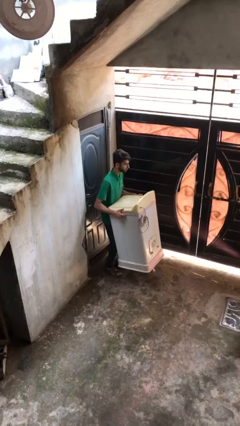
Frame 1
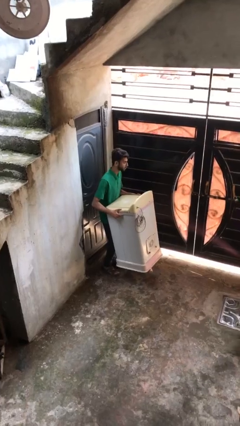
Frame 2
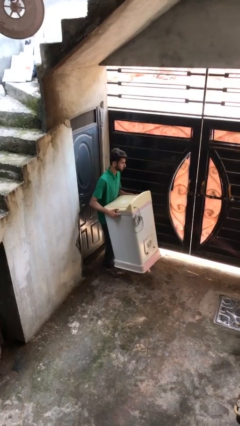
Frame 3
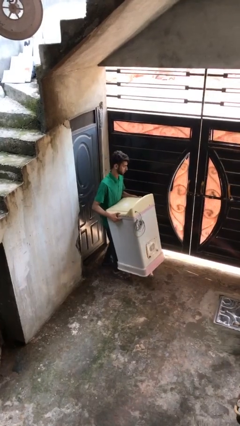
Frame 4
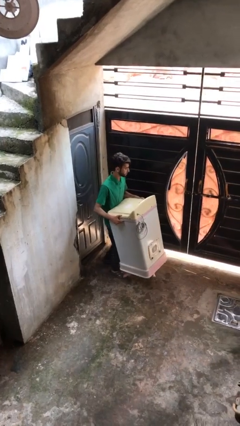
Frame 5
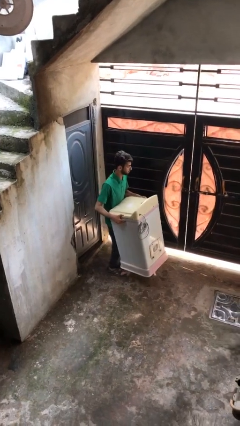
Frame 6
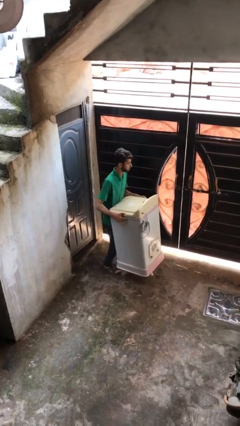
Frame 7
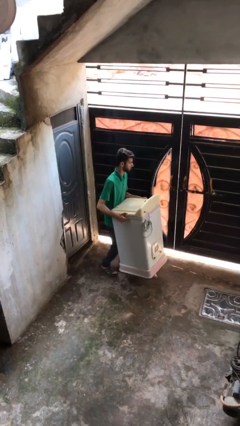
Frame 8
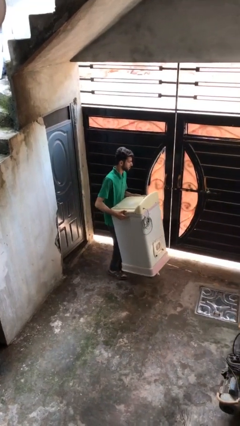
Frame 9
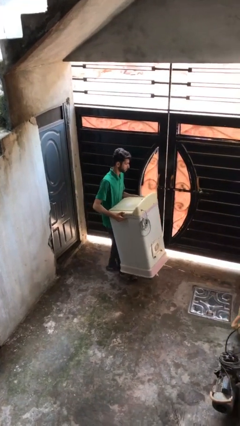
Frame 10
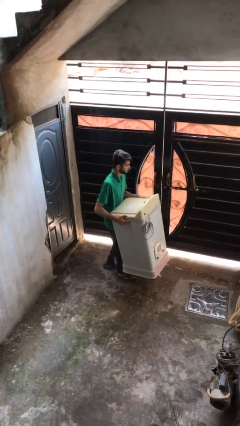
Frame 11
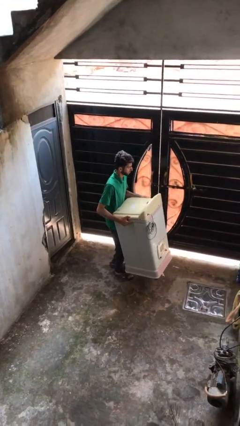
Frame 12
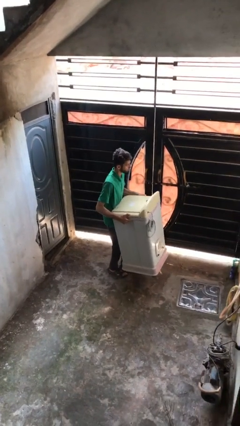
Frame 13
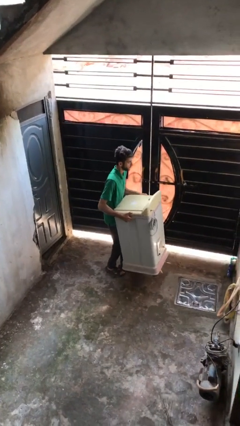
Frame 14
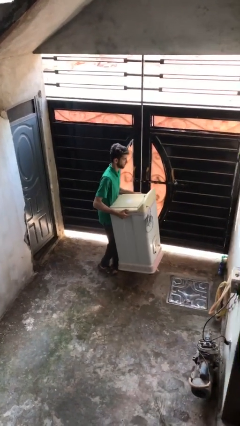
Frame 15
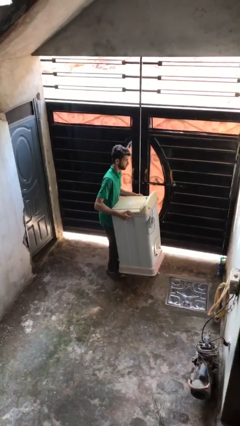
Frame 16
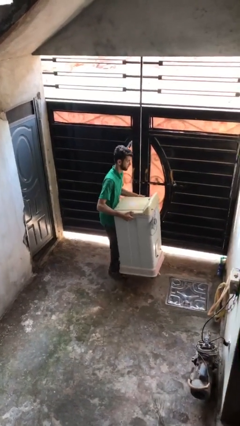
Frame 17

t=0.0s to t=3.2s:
person carries heavy object

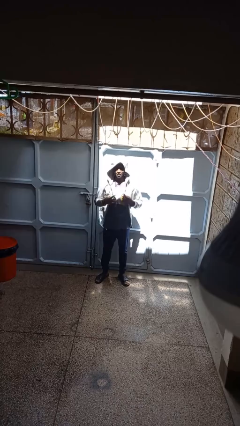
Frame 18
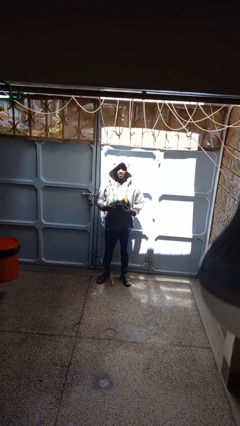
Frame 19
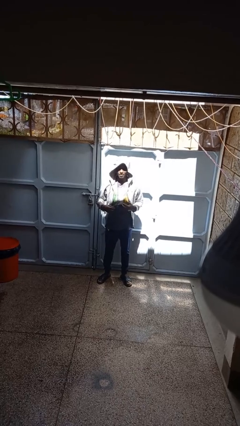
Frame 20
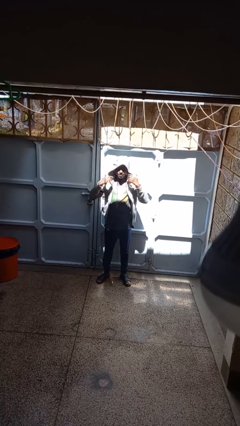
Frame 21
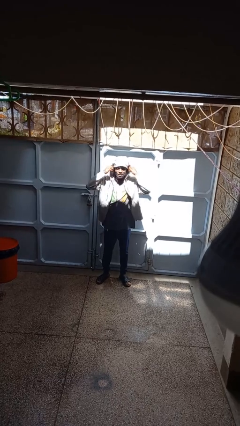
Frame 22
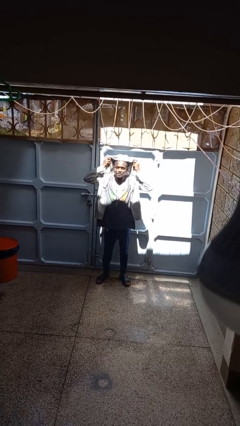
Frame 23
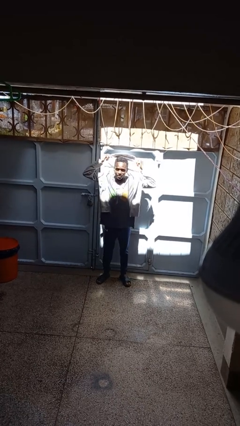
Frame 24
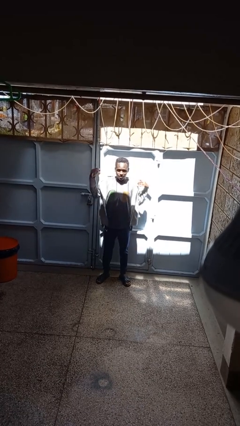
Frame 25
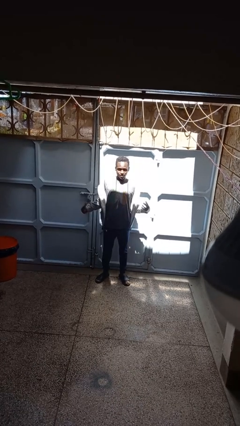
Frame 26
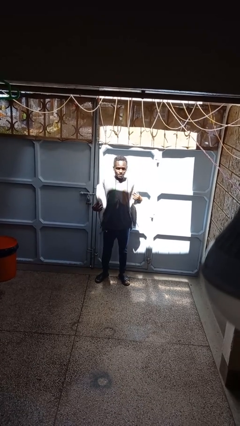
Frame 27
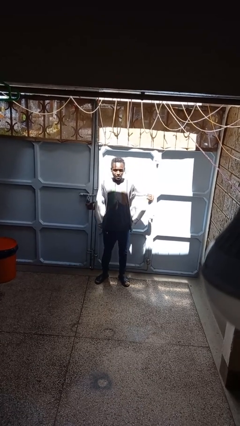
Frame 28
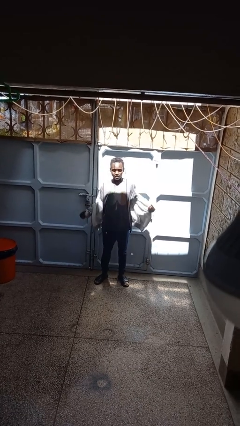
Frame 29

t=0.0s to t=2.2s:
person takes off hoodie

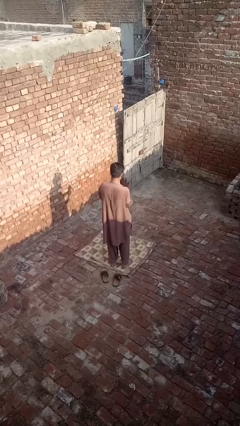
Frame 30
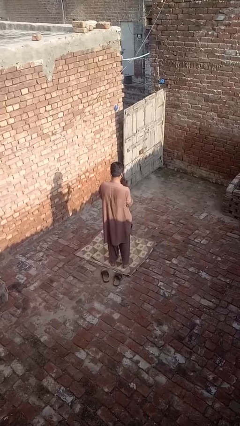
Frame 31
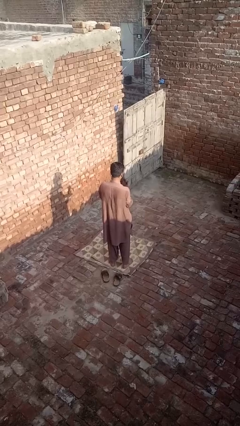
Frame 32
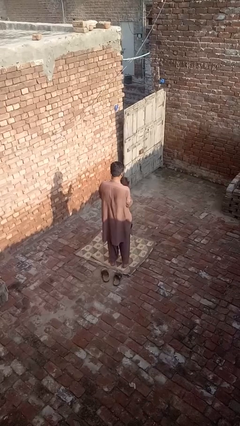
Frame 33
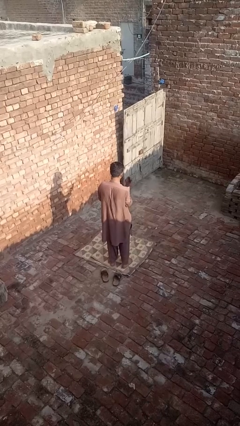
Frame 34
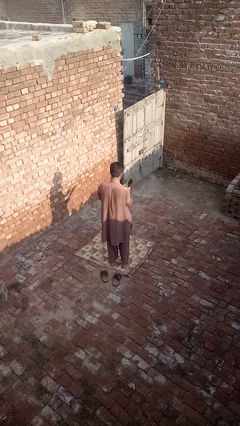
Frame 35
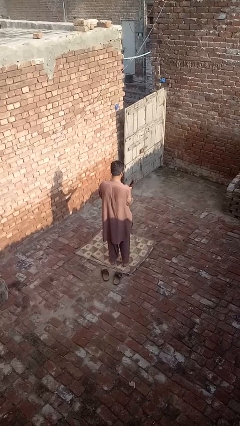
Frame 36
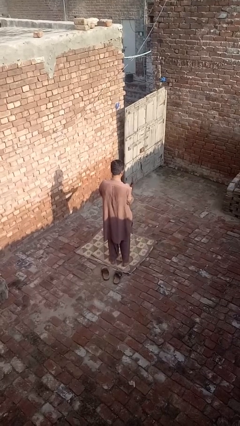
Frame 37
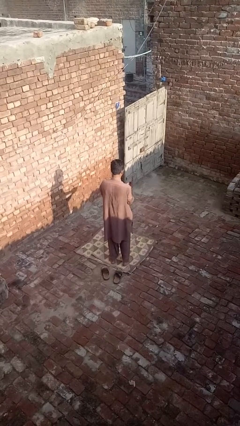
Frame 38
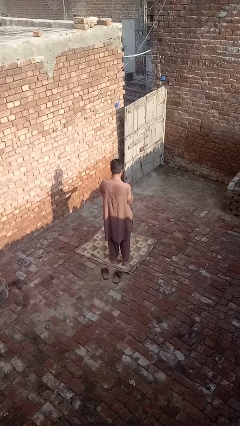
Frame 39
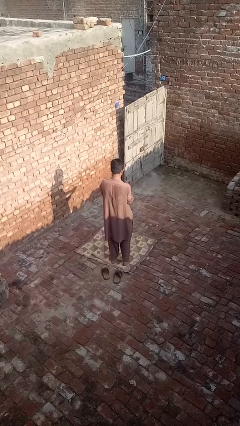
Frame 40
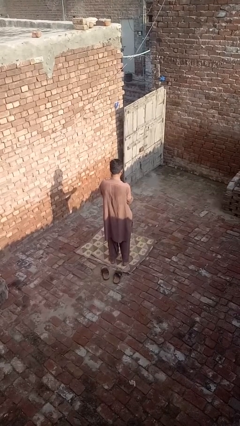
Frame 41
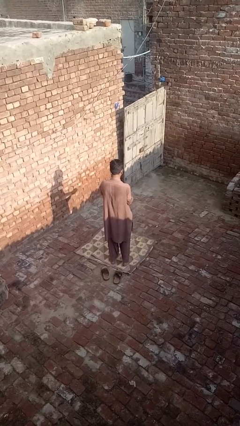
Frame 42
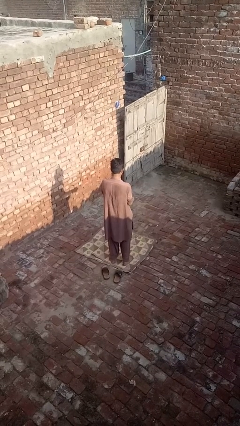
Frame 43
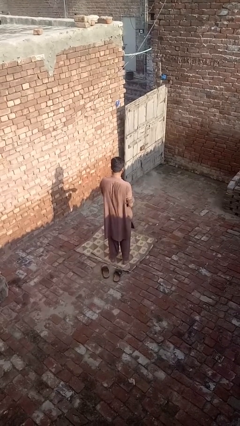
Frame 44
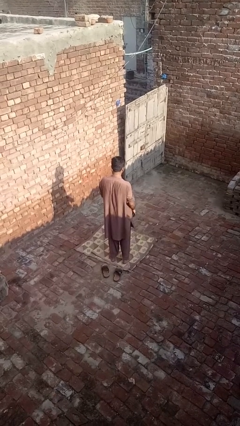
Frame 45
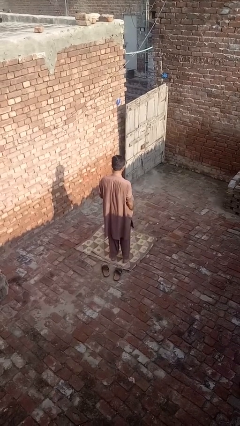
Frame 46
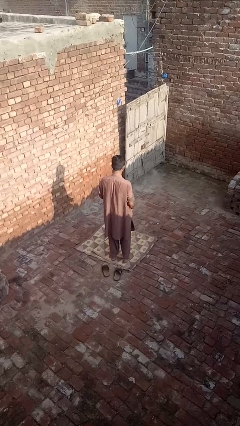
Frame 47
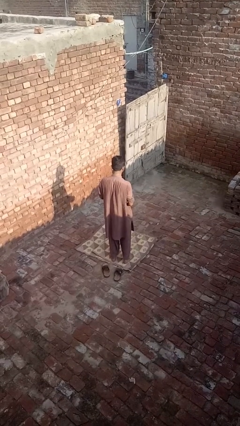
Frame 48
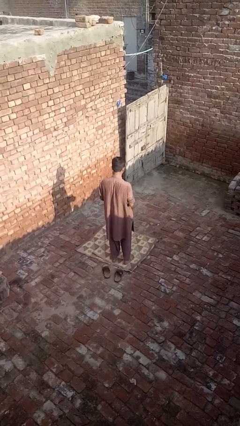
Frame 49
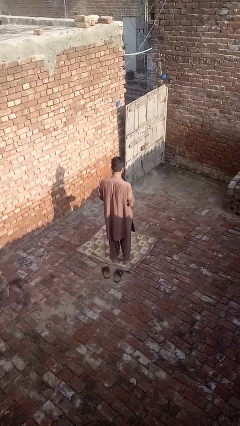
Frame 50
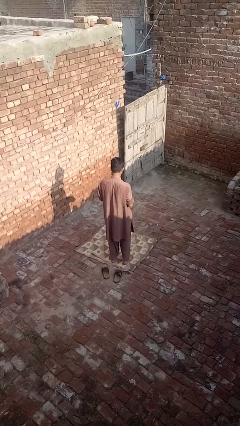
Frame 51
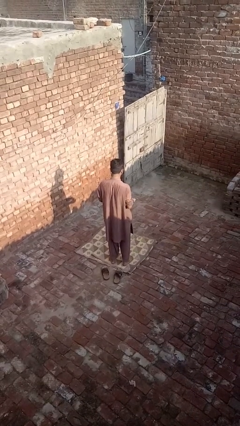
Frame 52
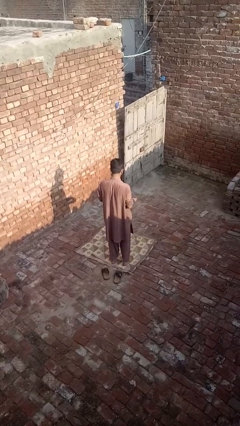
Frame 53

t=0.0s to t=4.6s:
person takes off gloves

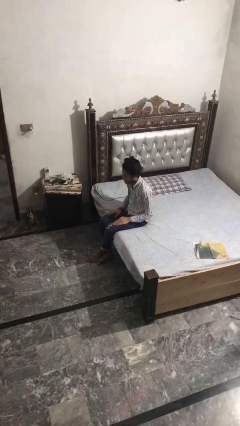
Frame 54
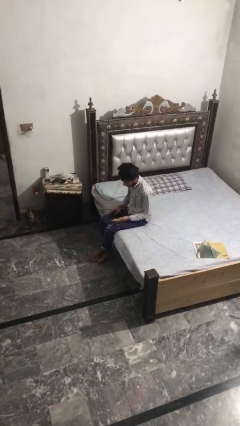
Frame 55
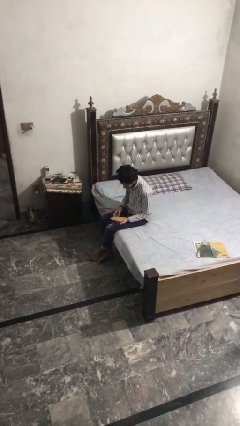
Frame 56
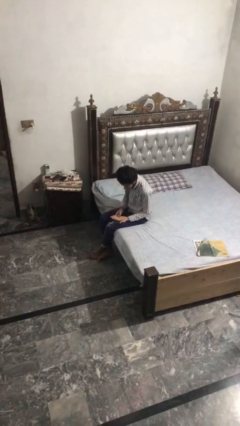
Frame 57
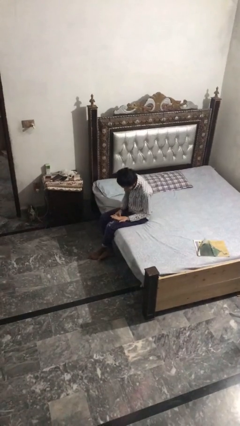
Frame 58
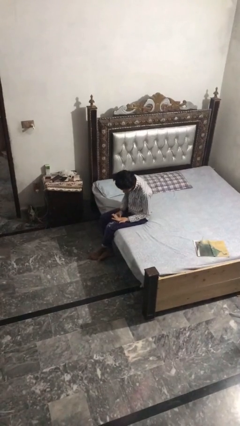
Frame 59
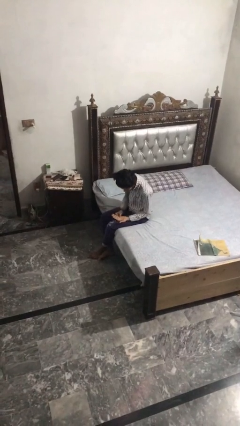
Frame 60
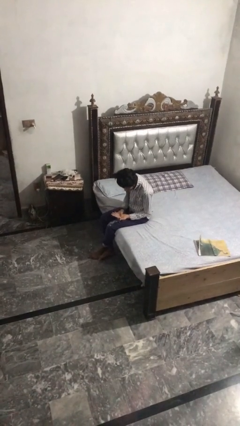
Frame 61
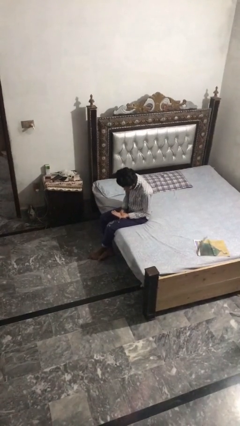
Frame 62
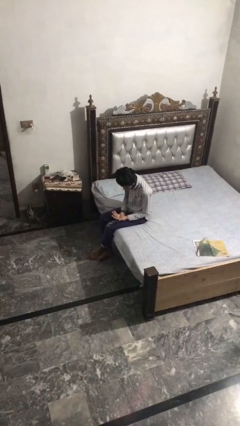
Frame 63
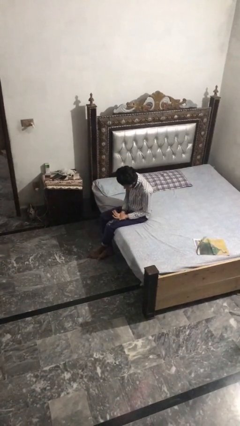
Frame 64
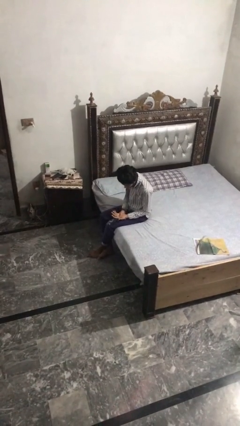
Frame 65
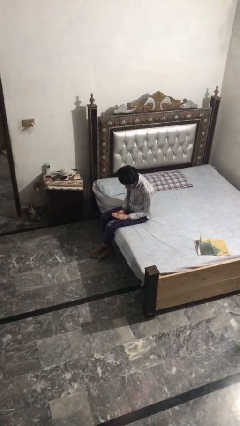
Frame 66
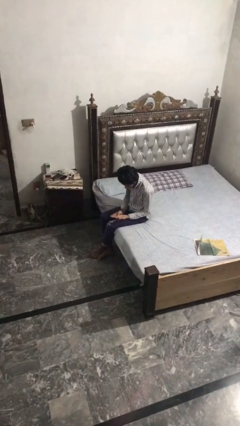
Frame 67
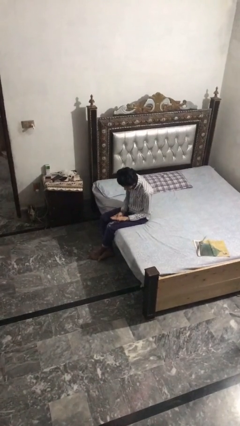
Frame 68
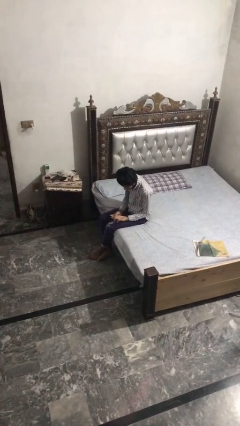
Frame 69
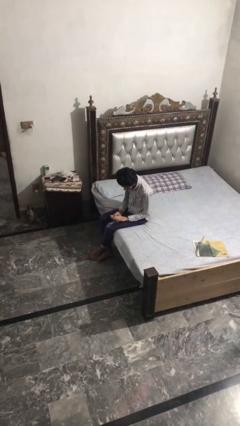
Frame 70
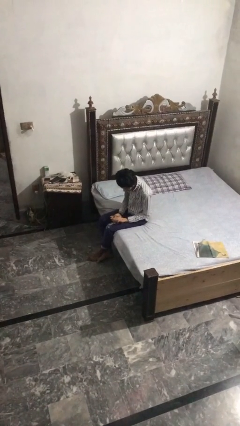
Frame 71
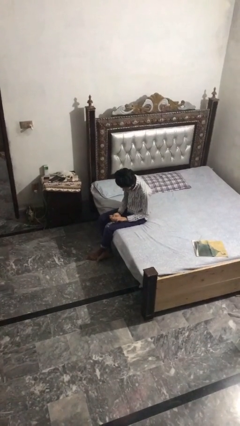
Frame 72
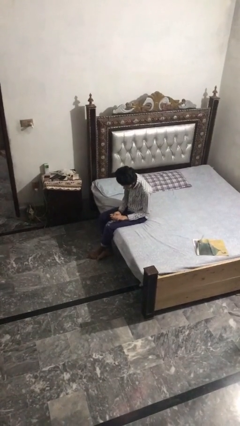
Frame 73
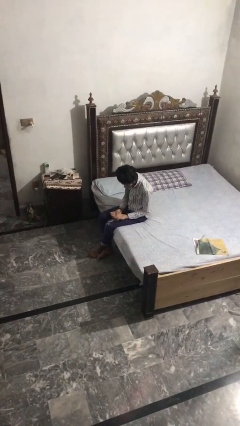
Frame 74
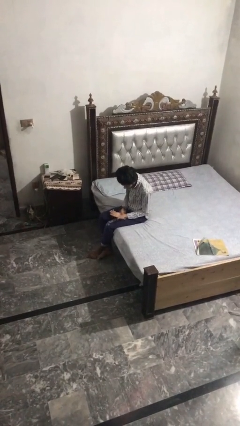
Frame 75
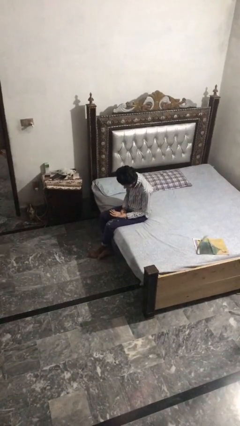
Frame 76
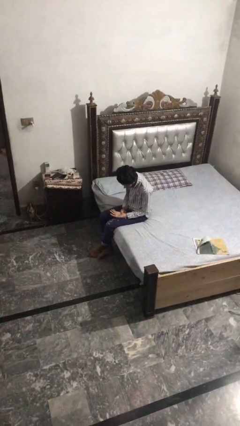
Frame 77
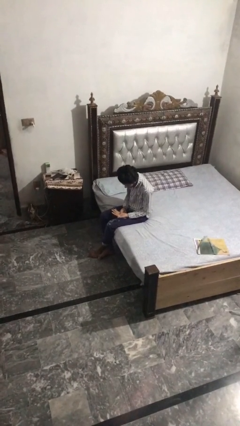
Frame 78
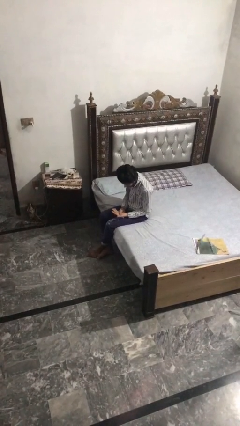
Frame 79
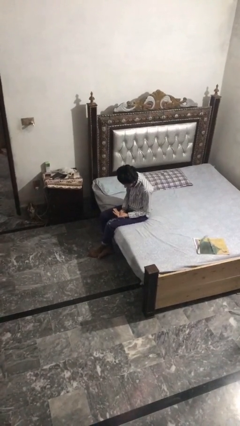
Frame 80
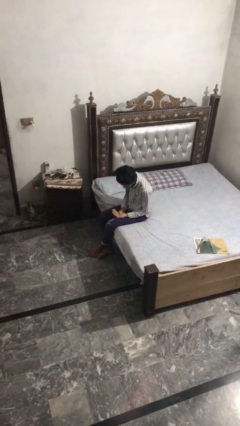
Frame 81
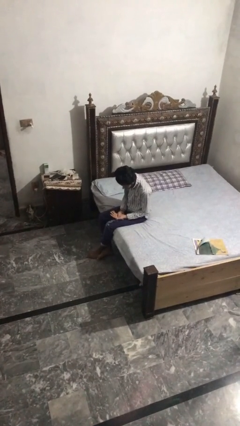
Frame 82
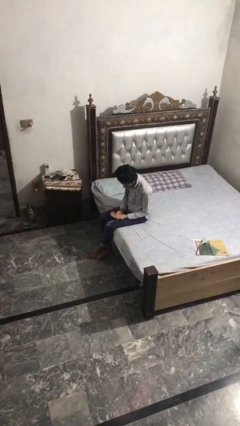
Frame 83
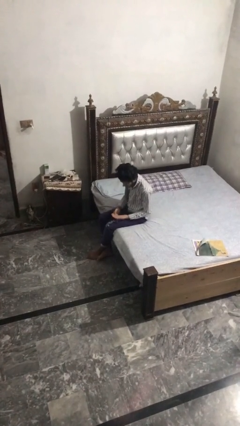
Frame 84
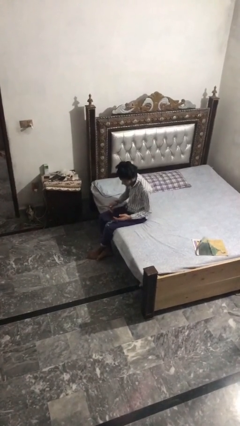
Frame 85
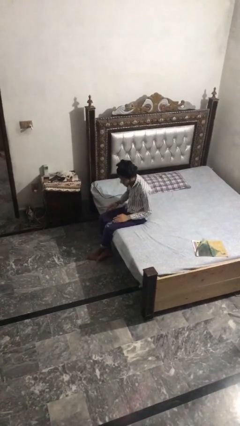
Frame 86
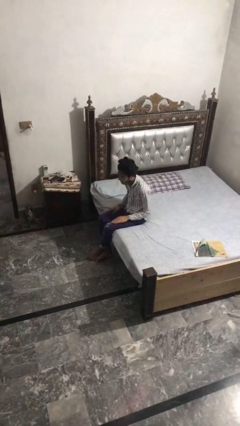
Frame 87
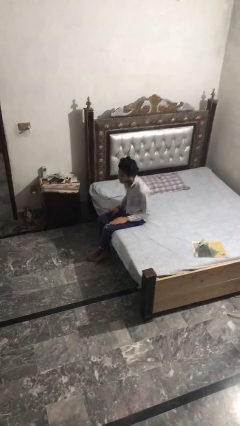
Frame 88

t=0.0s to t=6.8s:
person looks at hands in lap

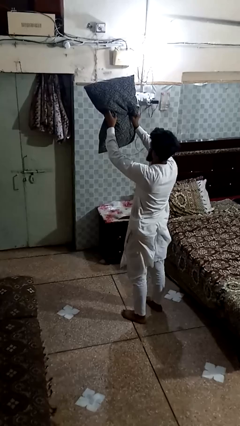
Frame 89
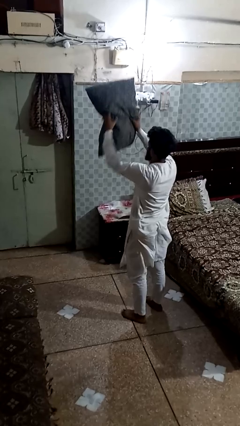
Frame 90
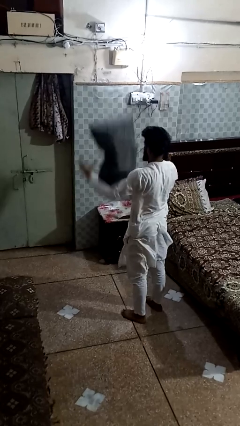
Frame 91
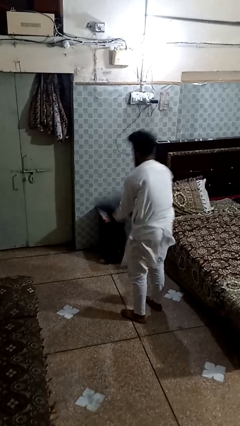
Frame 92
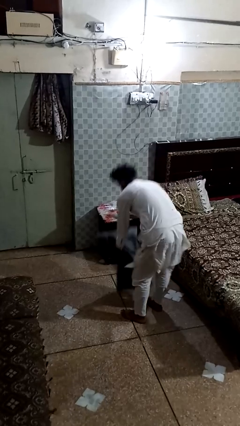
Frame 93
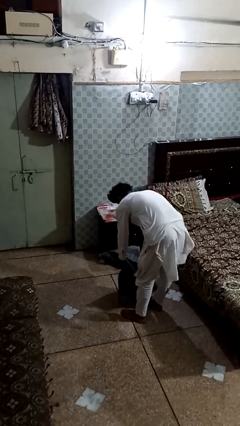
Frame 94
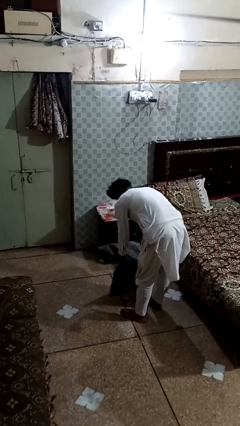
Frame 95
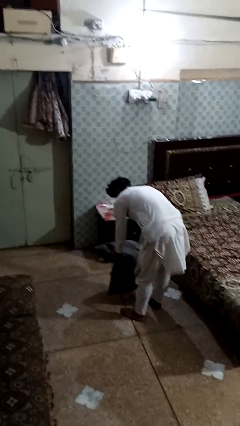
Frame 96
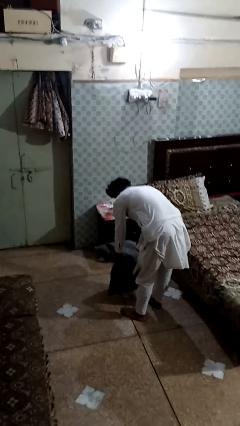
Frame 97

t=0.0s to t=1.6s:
person drops object
